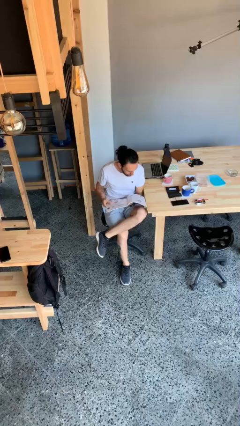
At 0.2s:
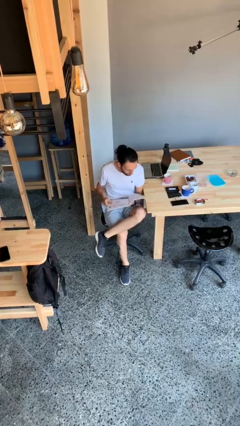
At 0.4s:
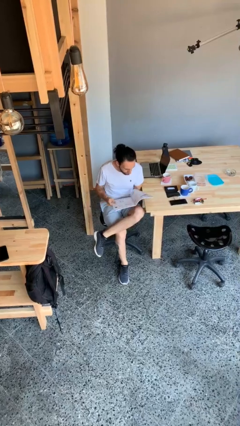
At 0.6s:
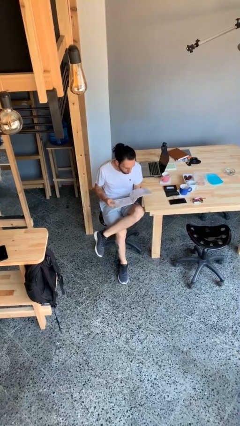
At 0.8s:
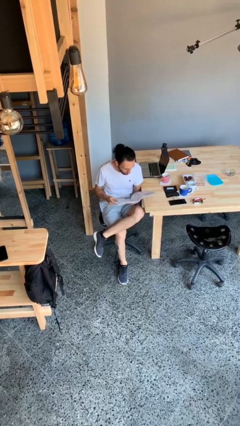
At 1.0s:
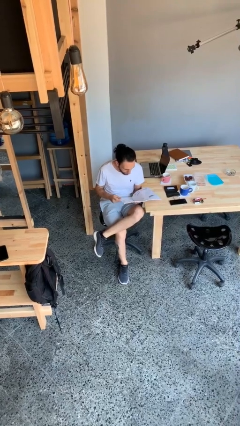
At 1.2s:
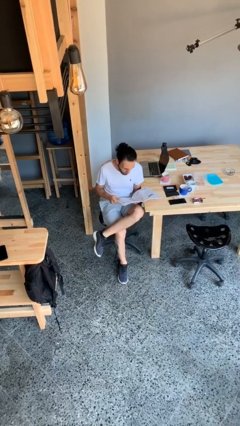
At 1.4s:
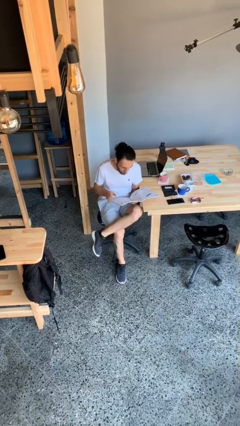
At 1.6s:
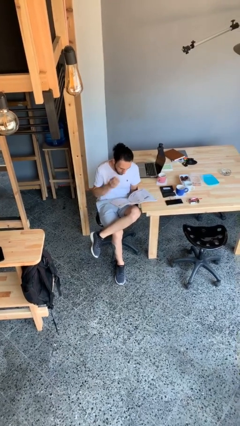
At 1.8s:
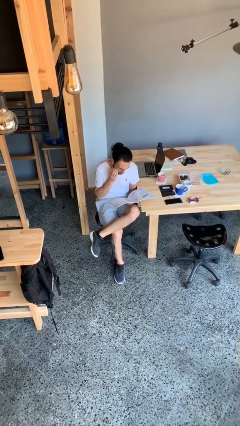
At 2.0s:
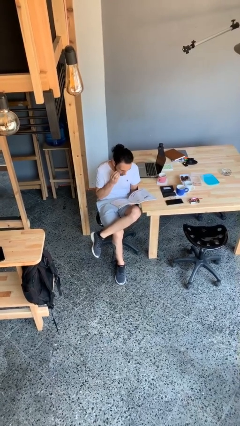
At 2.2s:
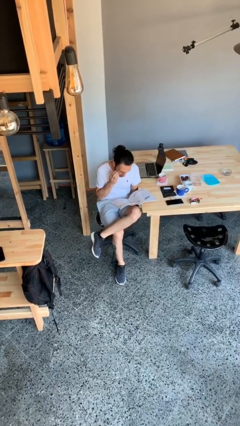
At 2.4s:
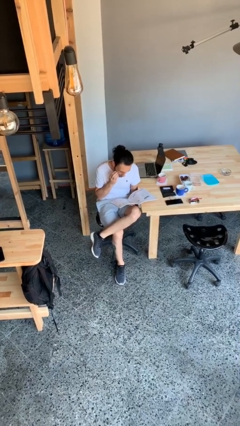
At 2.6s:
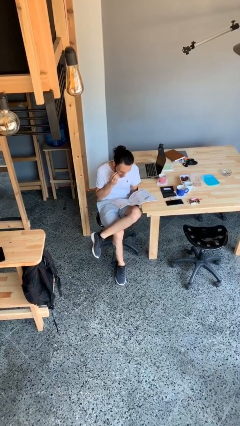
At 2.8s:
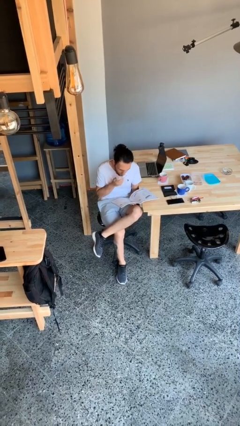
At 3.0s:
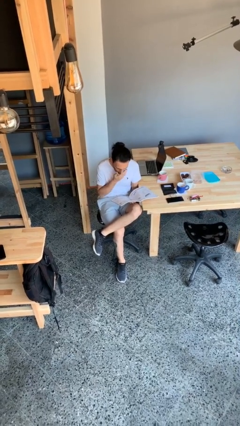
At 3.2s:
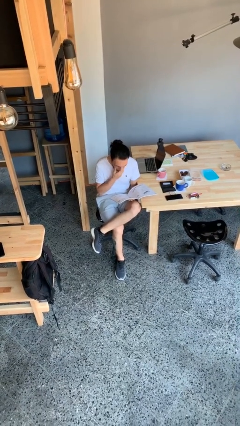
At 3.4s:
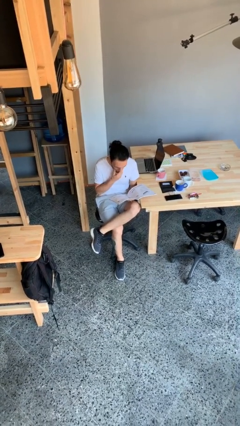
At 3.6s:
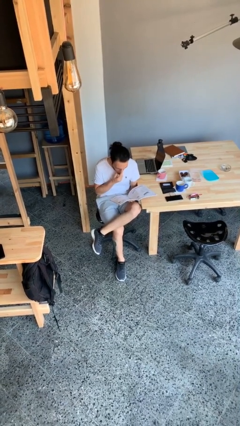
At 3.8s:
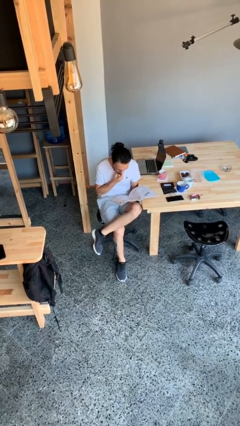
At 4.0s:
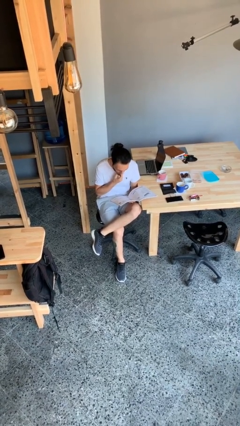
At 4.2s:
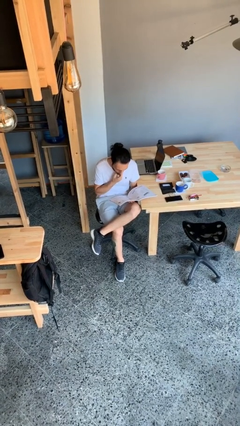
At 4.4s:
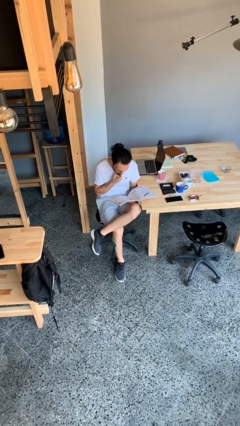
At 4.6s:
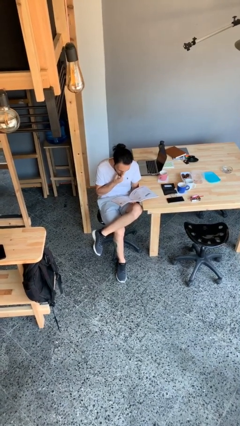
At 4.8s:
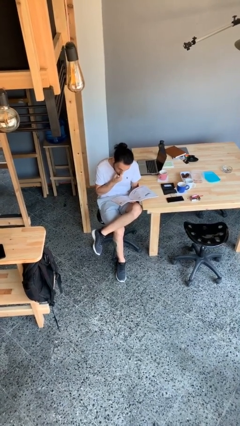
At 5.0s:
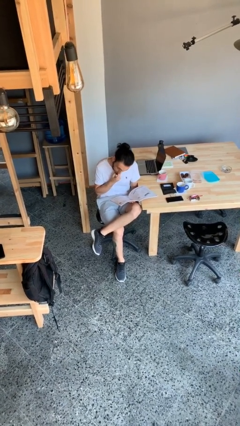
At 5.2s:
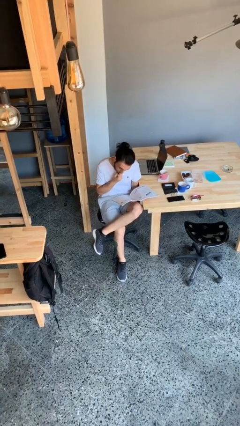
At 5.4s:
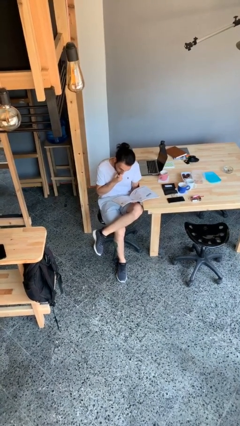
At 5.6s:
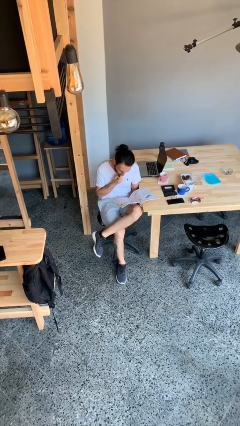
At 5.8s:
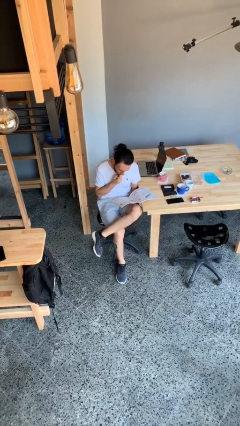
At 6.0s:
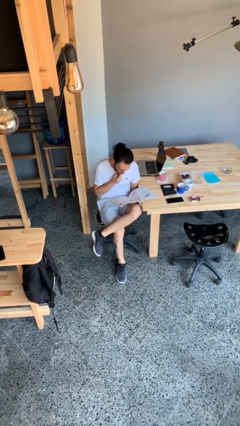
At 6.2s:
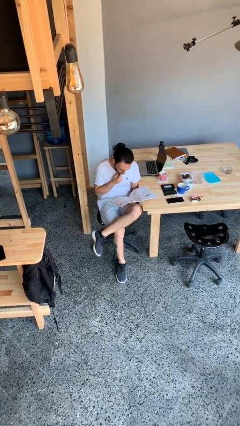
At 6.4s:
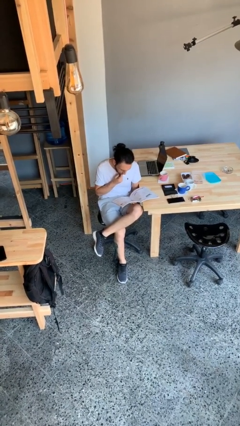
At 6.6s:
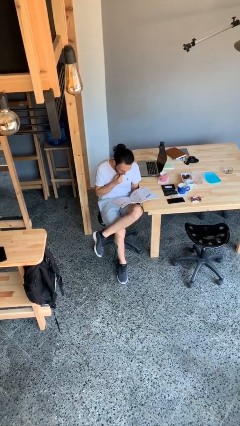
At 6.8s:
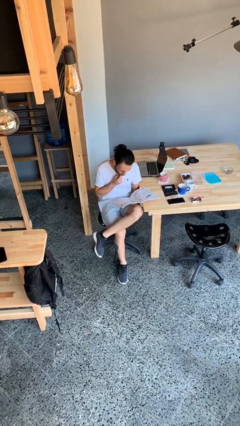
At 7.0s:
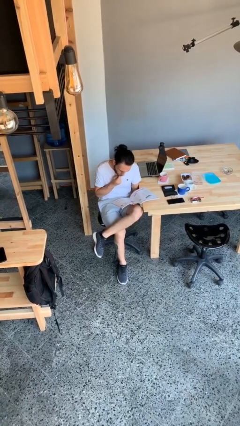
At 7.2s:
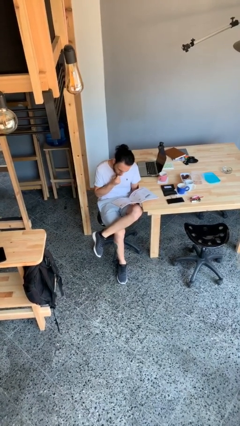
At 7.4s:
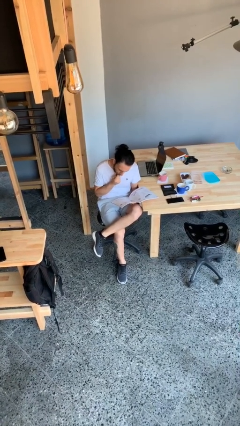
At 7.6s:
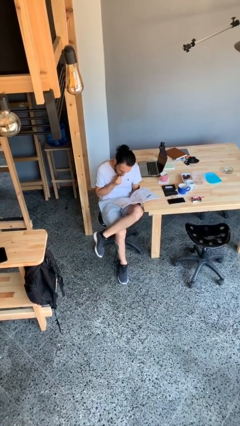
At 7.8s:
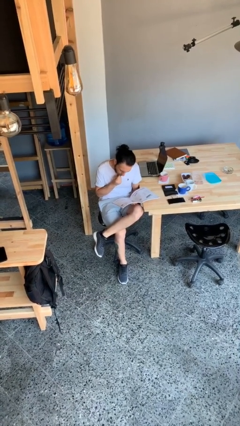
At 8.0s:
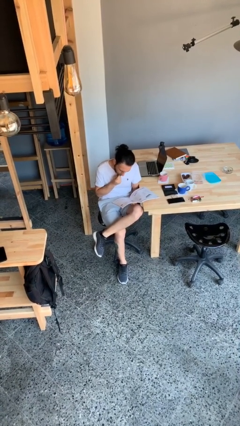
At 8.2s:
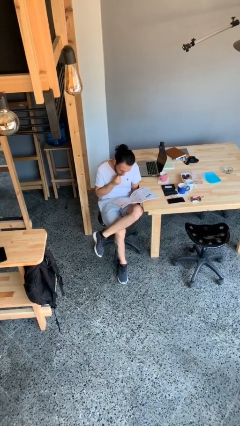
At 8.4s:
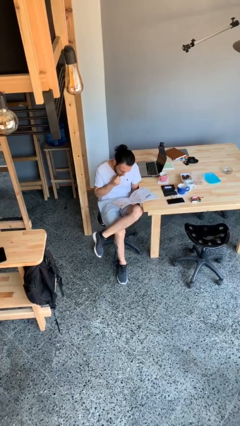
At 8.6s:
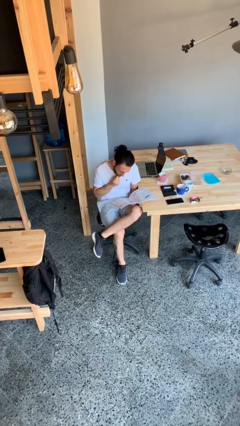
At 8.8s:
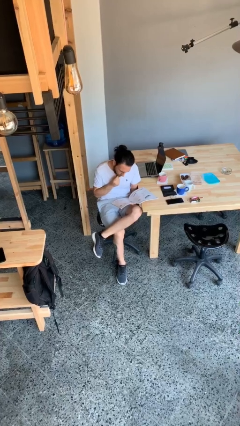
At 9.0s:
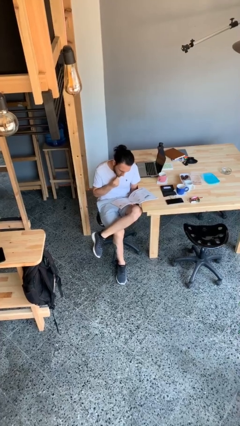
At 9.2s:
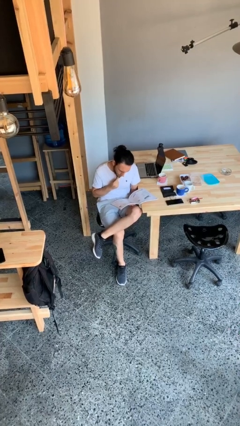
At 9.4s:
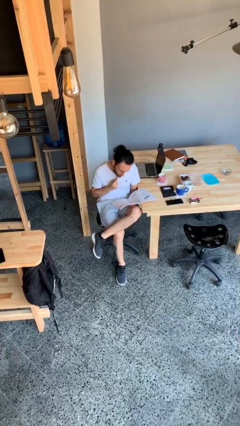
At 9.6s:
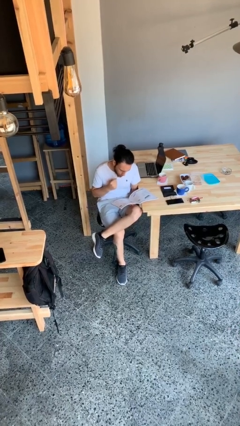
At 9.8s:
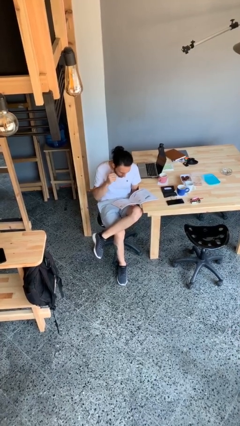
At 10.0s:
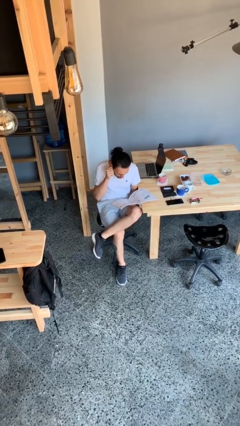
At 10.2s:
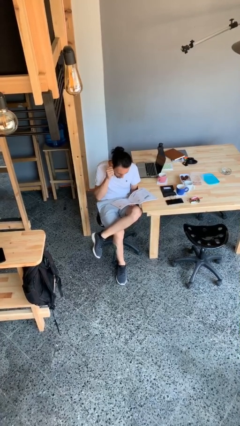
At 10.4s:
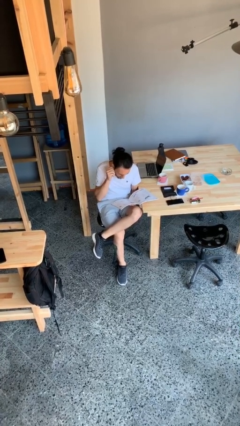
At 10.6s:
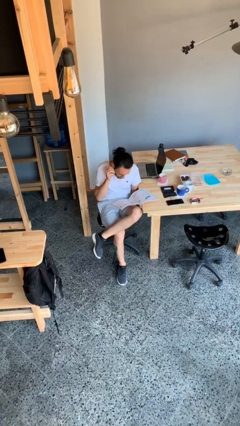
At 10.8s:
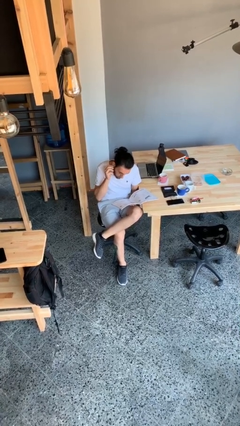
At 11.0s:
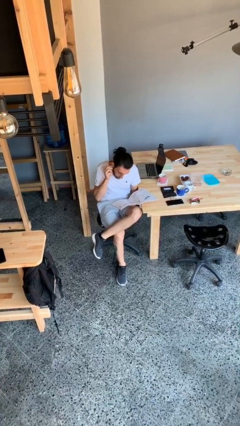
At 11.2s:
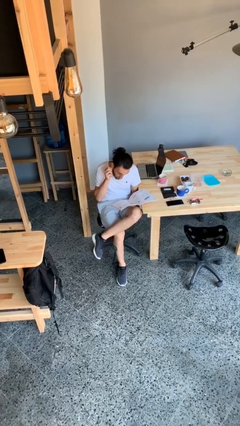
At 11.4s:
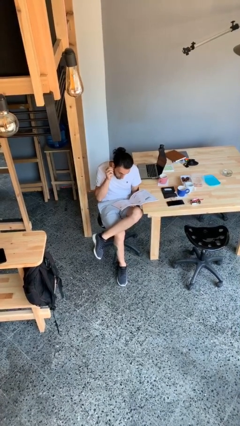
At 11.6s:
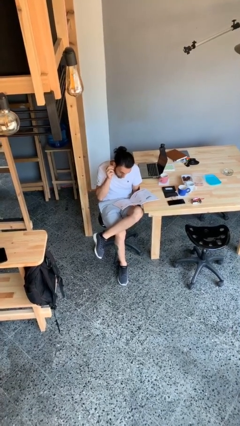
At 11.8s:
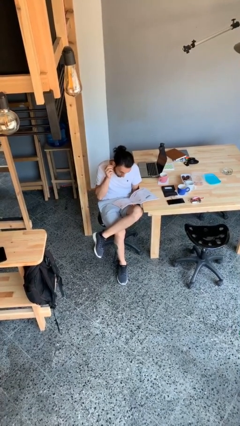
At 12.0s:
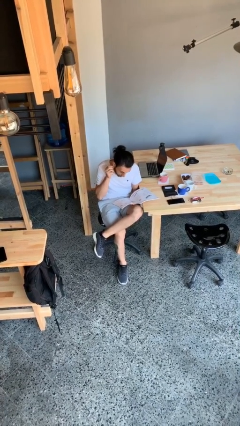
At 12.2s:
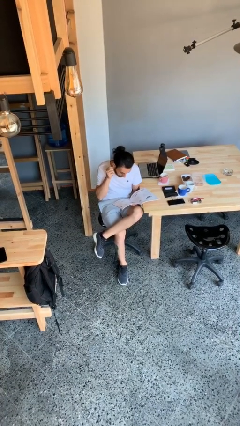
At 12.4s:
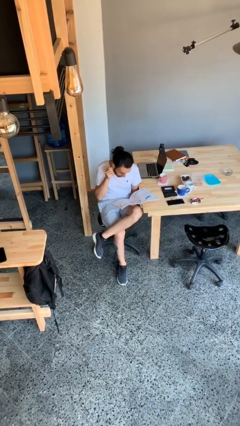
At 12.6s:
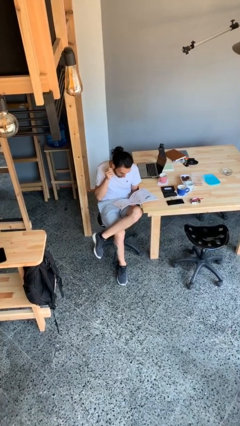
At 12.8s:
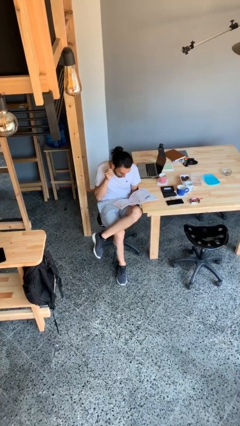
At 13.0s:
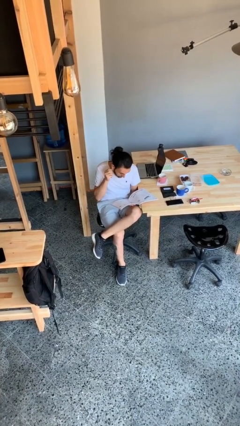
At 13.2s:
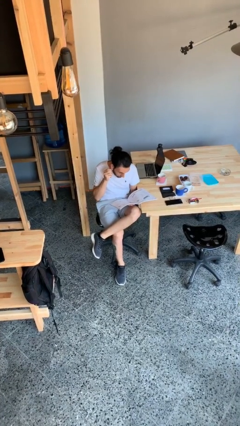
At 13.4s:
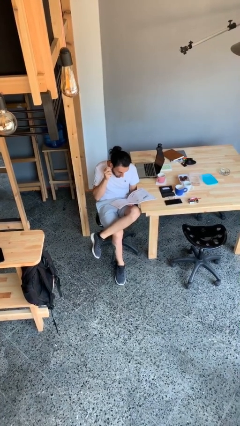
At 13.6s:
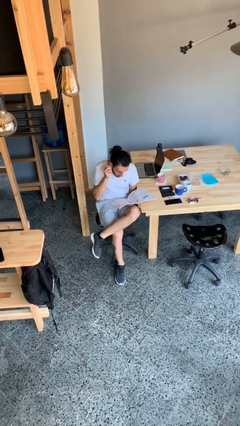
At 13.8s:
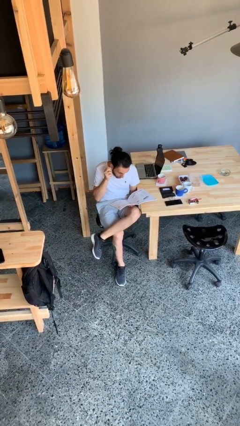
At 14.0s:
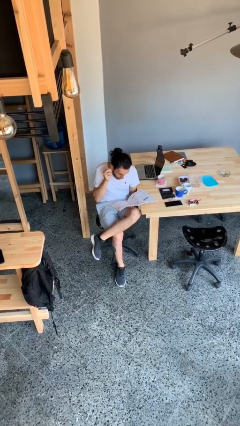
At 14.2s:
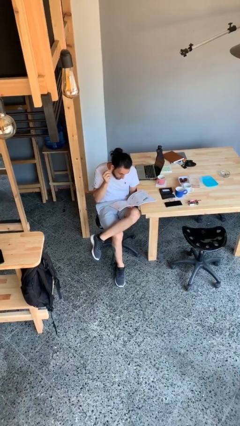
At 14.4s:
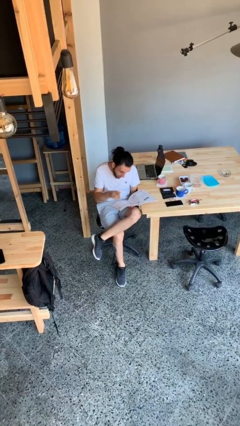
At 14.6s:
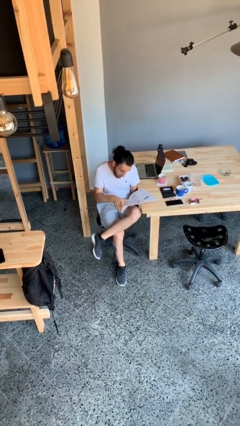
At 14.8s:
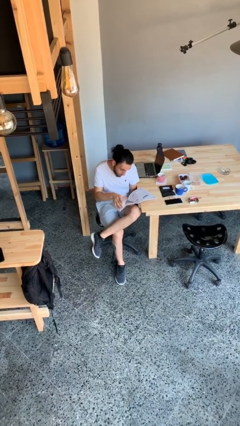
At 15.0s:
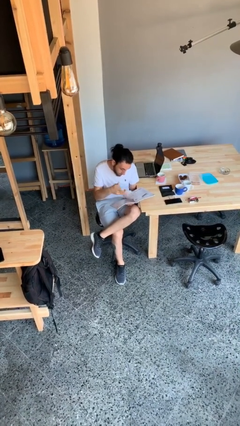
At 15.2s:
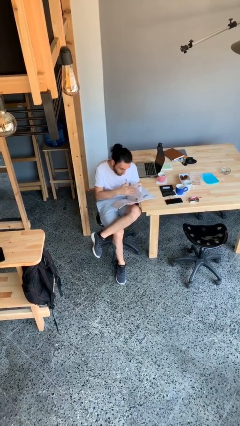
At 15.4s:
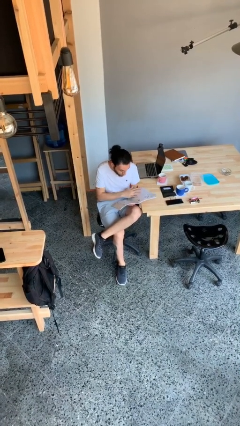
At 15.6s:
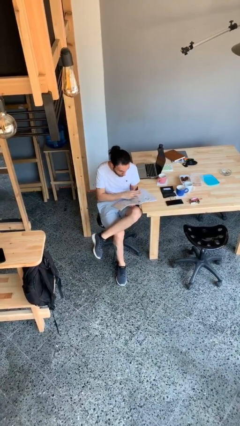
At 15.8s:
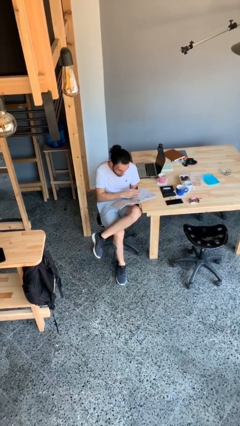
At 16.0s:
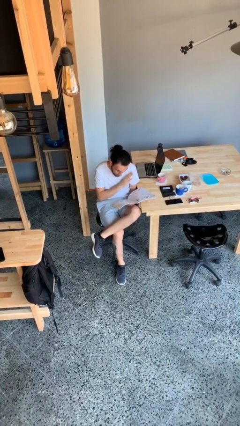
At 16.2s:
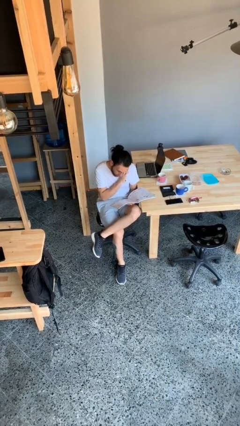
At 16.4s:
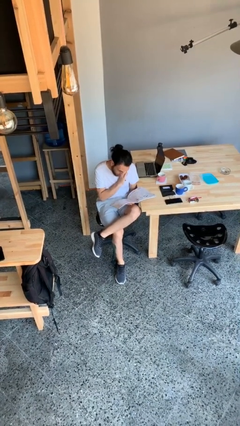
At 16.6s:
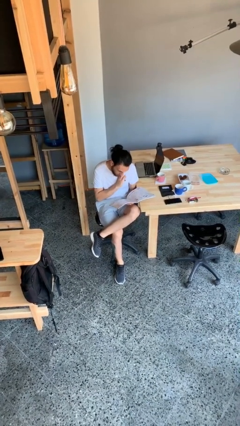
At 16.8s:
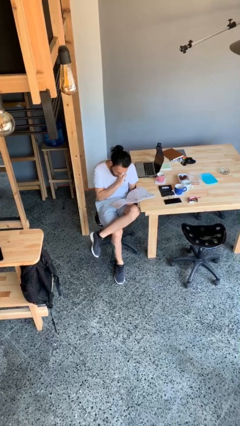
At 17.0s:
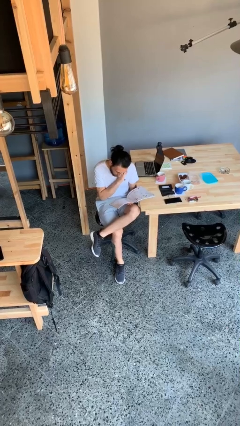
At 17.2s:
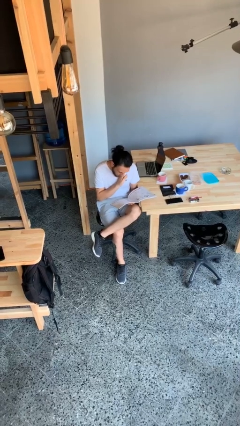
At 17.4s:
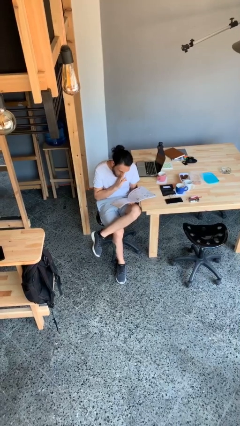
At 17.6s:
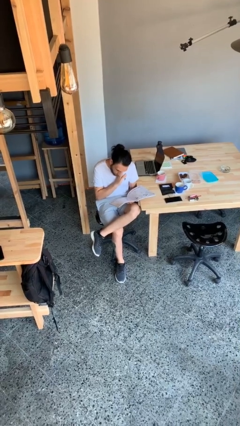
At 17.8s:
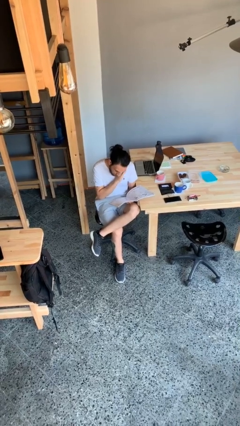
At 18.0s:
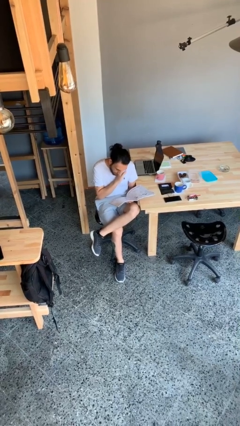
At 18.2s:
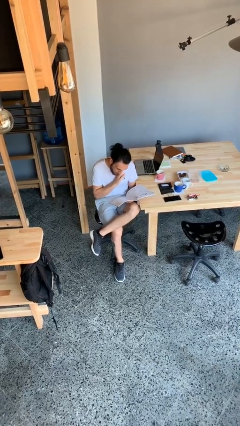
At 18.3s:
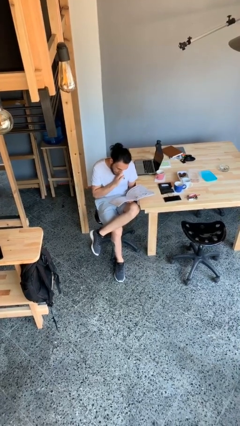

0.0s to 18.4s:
person reads document
